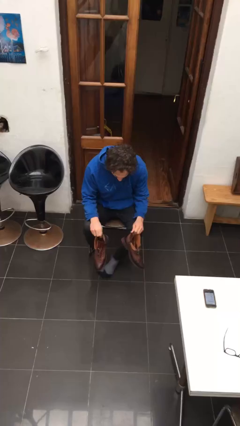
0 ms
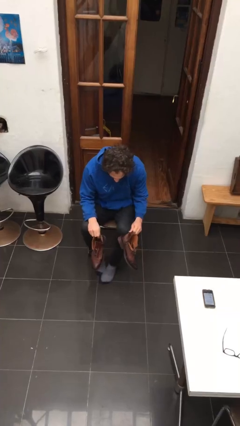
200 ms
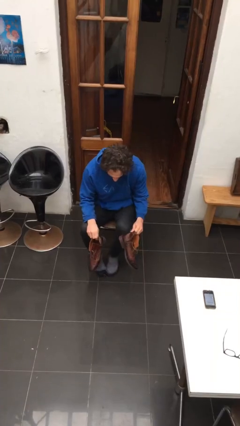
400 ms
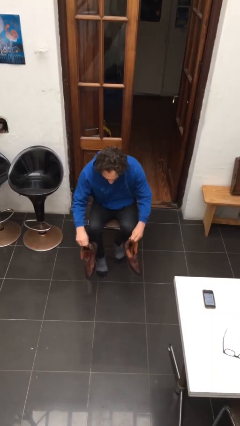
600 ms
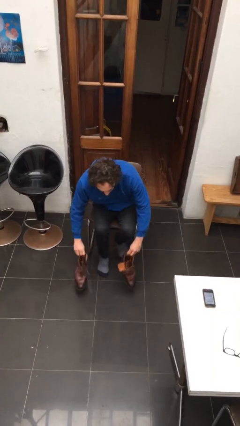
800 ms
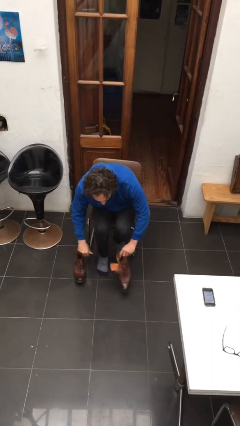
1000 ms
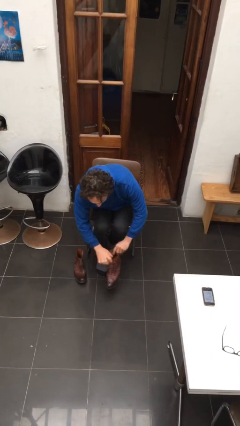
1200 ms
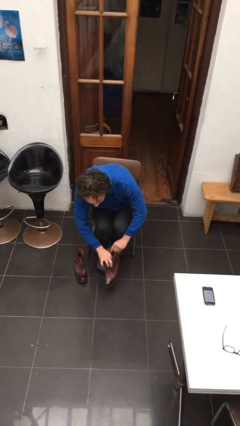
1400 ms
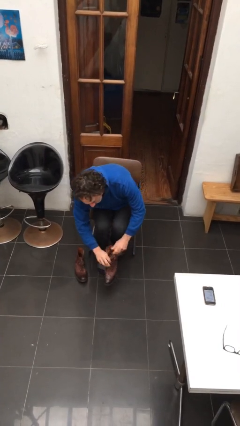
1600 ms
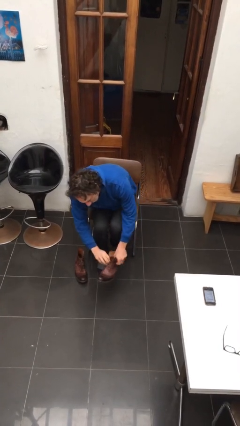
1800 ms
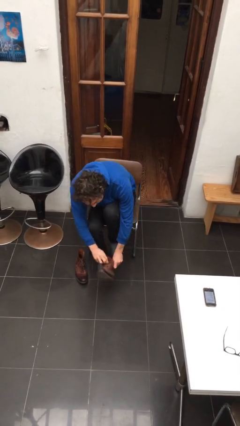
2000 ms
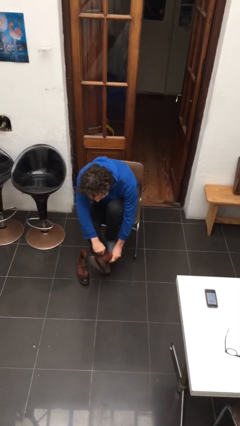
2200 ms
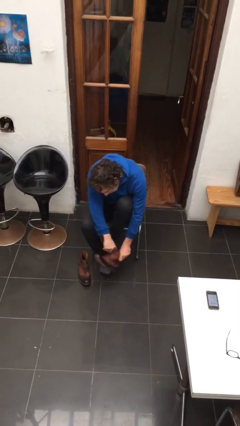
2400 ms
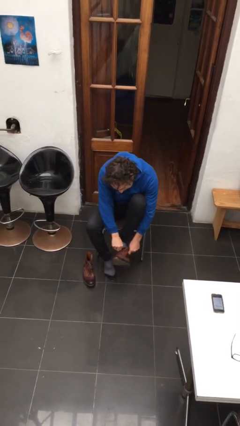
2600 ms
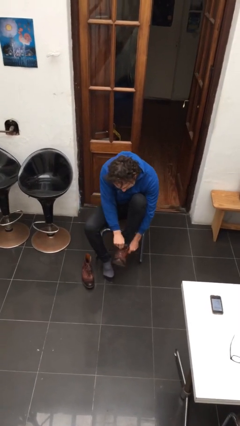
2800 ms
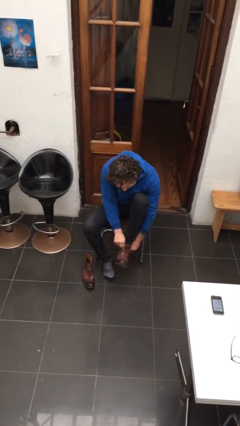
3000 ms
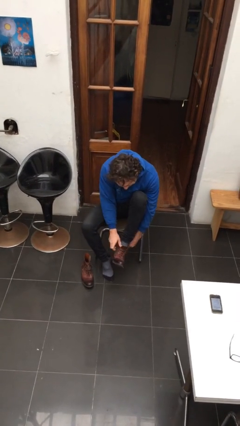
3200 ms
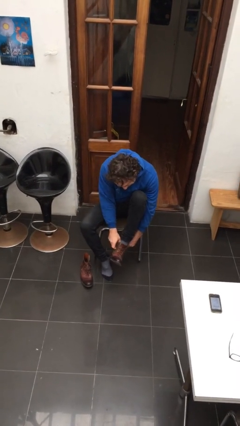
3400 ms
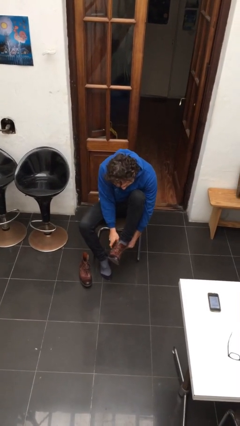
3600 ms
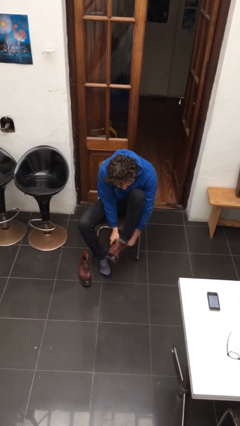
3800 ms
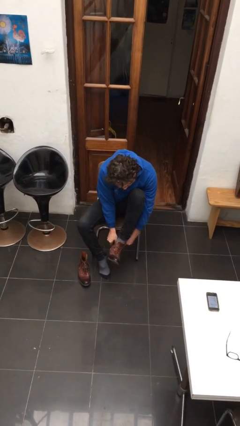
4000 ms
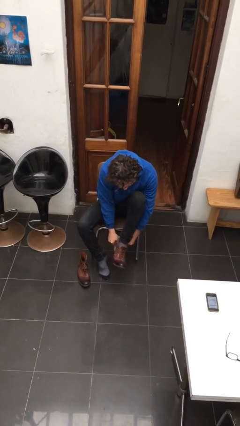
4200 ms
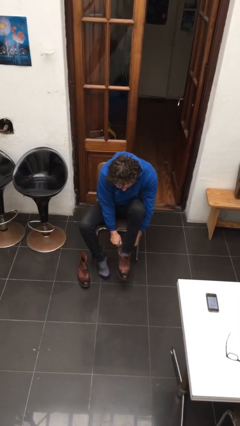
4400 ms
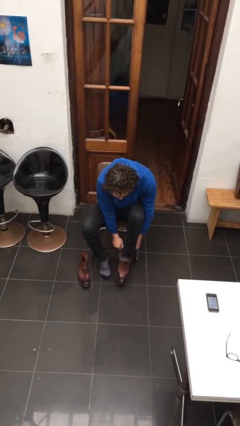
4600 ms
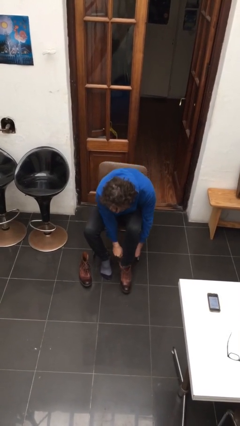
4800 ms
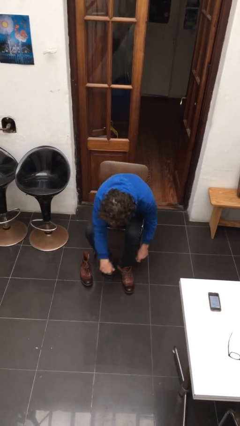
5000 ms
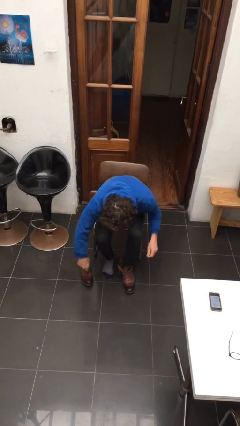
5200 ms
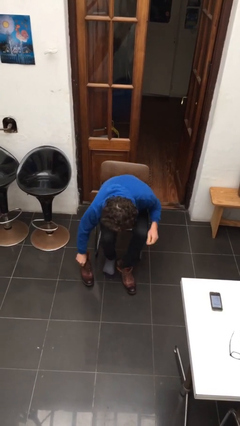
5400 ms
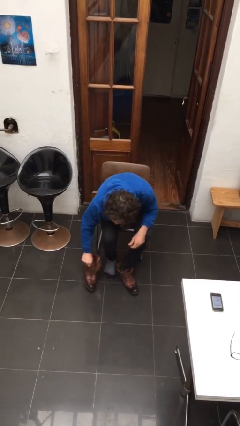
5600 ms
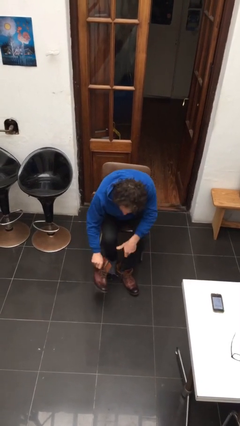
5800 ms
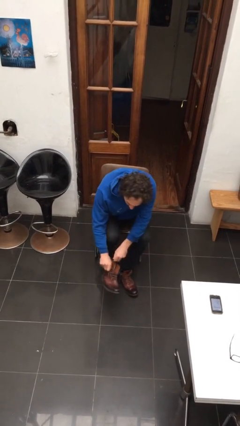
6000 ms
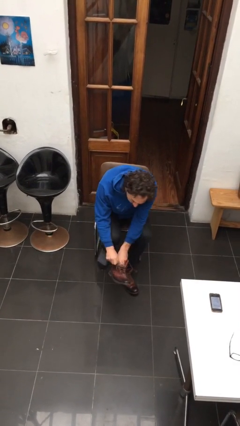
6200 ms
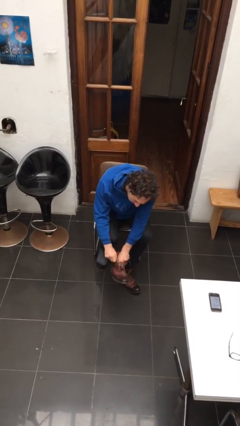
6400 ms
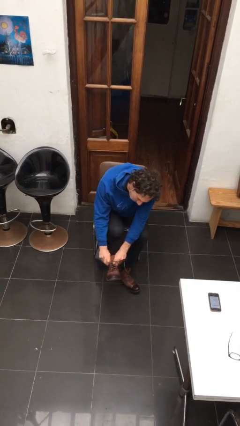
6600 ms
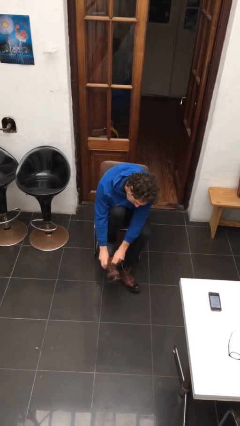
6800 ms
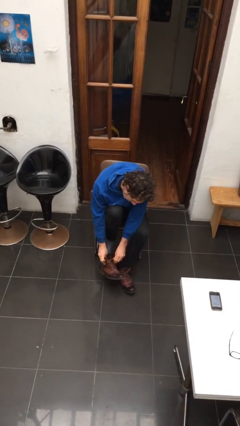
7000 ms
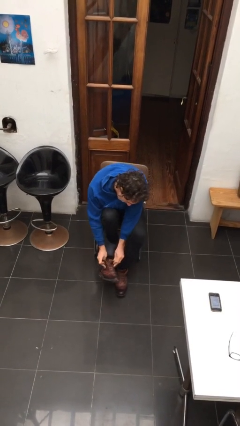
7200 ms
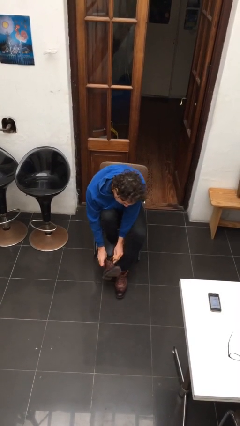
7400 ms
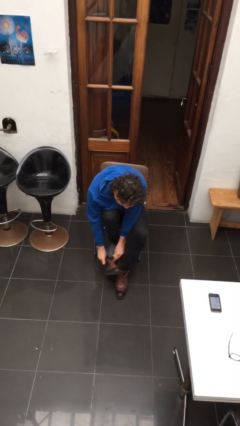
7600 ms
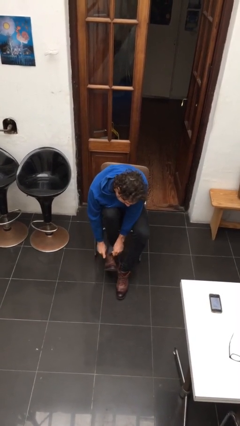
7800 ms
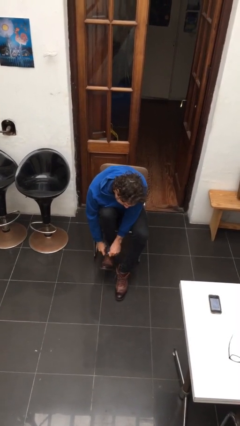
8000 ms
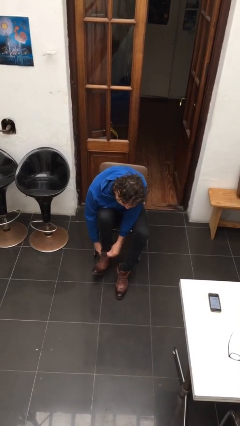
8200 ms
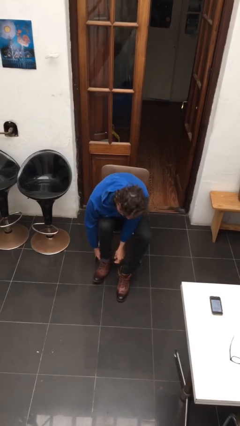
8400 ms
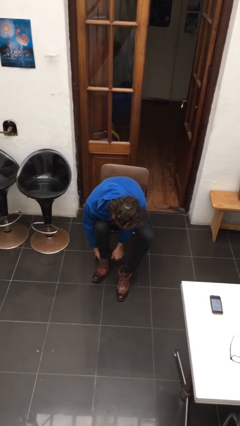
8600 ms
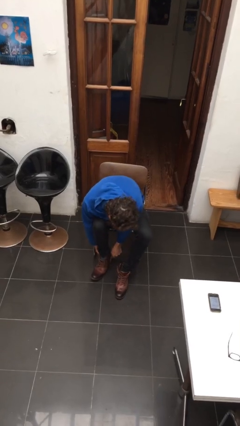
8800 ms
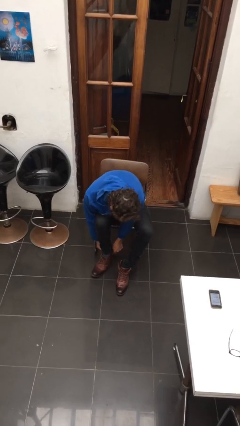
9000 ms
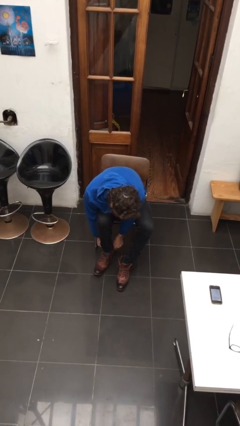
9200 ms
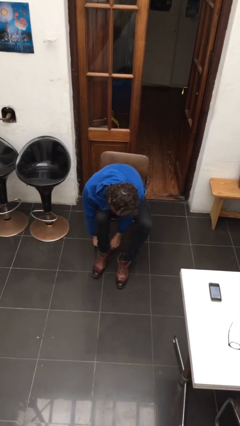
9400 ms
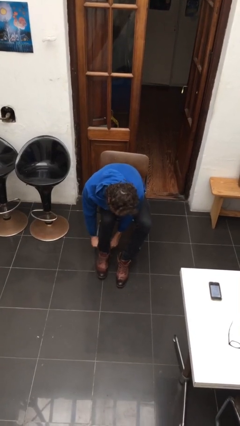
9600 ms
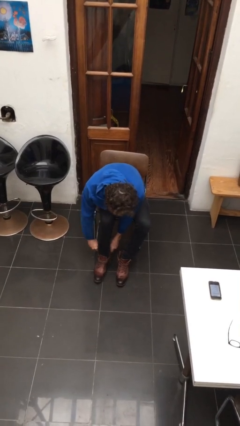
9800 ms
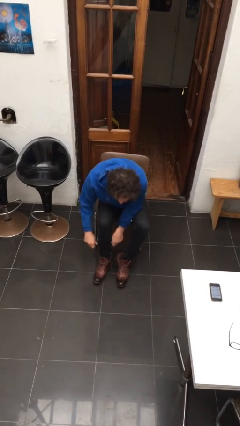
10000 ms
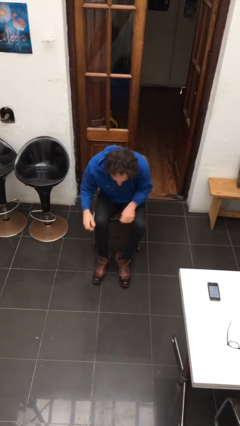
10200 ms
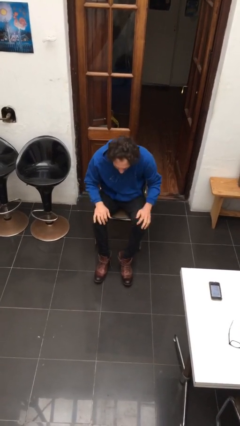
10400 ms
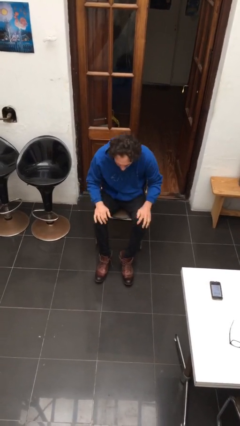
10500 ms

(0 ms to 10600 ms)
person puts on boots

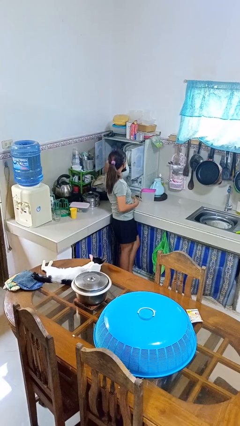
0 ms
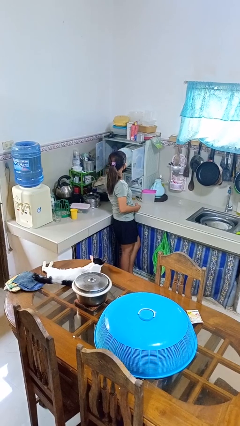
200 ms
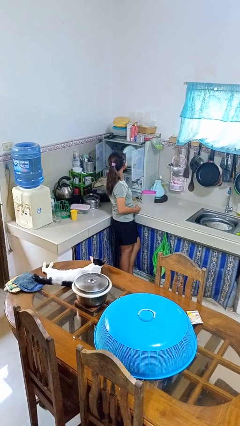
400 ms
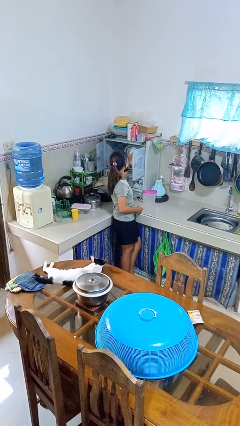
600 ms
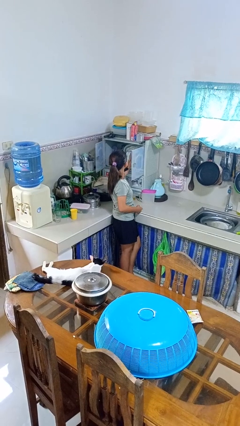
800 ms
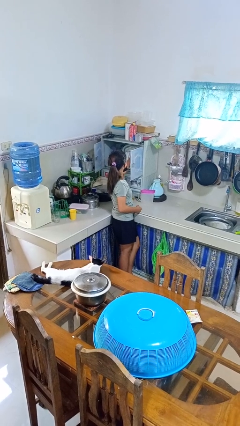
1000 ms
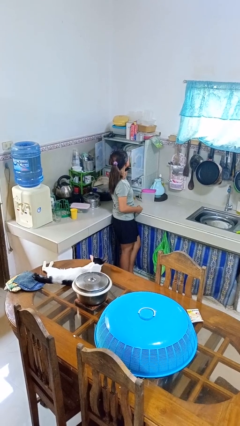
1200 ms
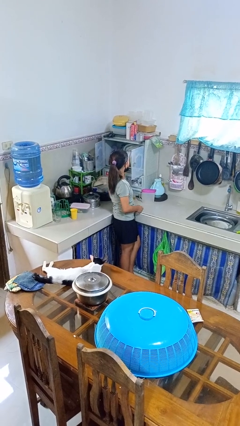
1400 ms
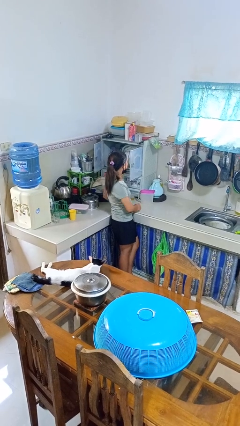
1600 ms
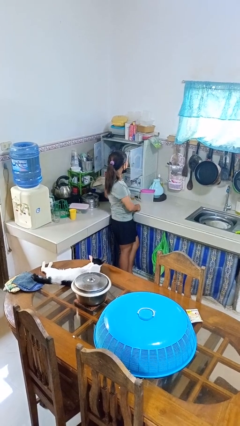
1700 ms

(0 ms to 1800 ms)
person puts object into kitchen drawer

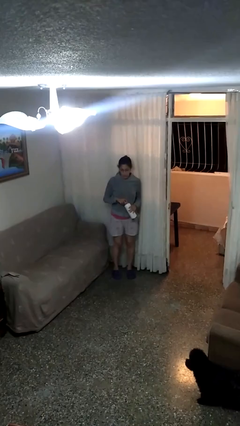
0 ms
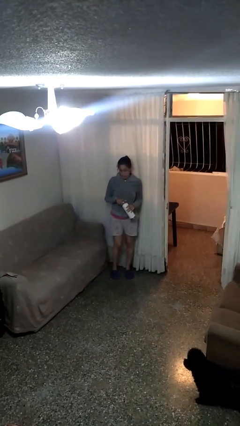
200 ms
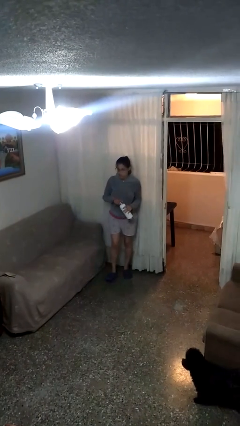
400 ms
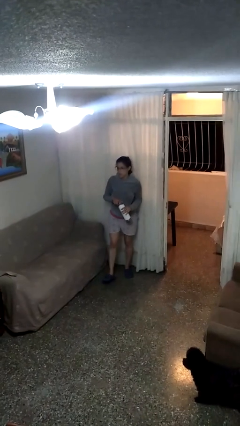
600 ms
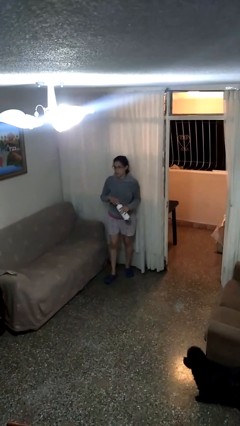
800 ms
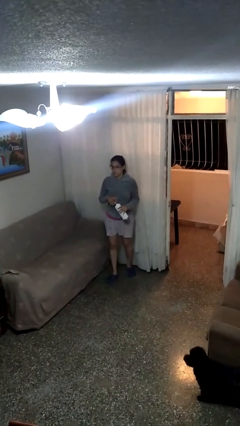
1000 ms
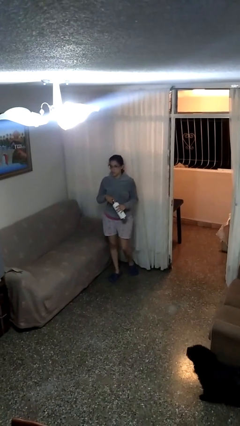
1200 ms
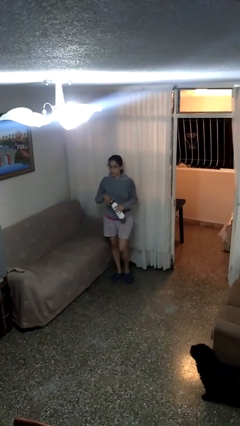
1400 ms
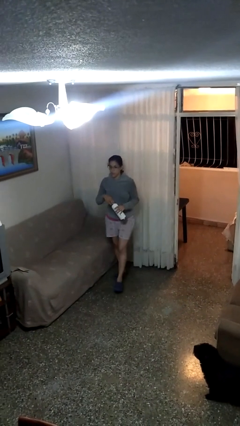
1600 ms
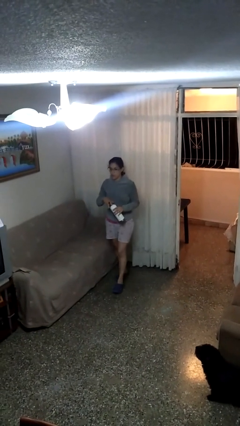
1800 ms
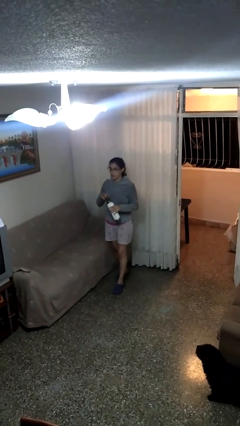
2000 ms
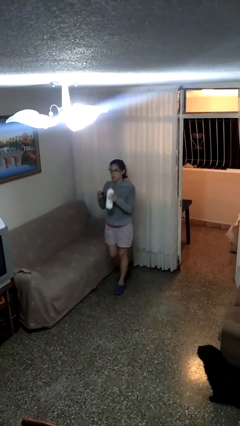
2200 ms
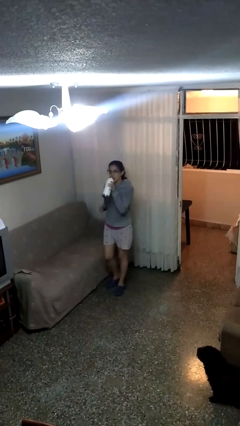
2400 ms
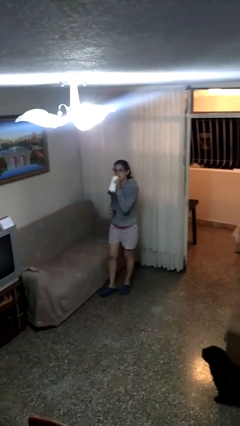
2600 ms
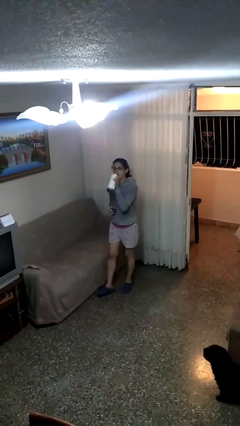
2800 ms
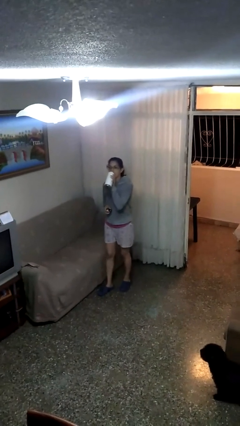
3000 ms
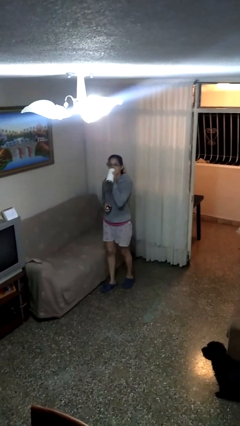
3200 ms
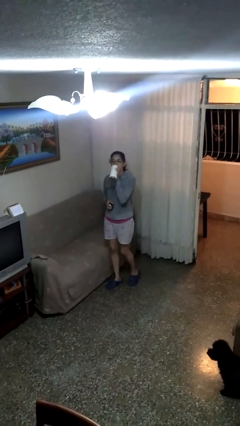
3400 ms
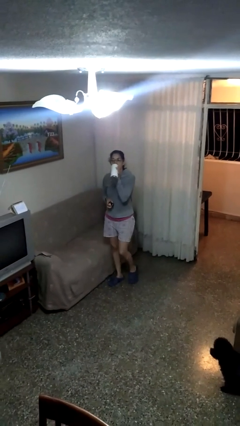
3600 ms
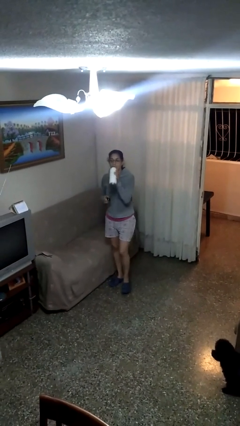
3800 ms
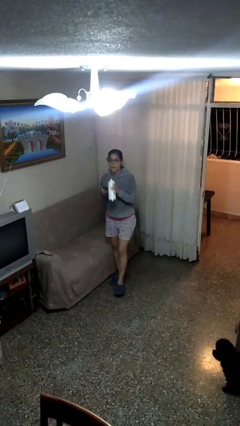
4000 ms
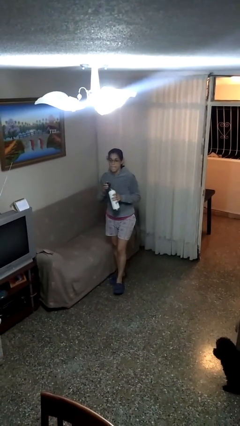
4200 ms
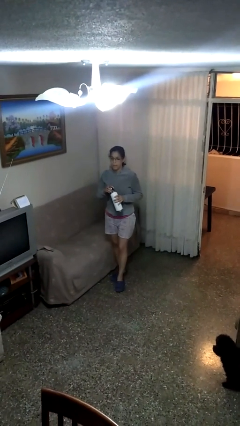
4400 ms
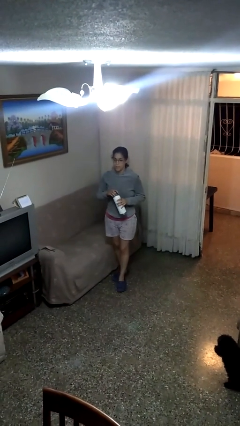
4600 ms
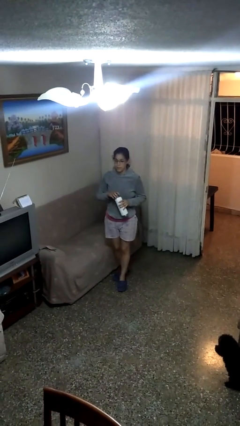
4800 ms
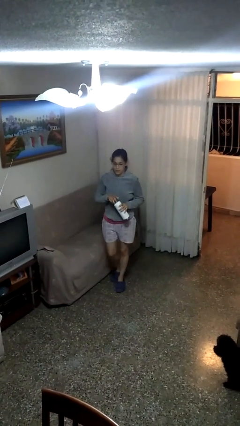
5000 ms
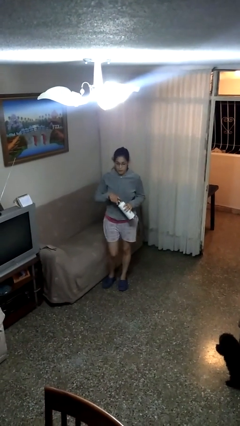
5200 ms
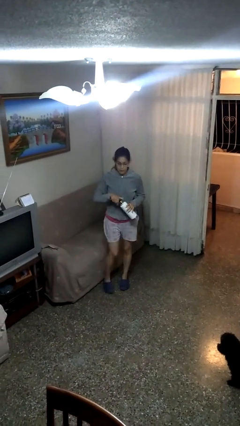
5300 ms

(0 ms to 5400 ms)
person drinks from bottle

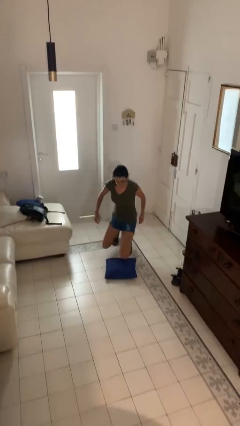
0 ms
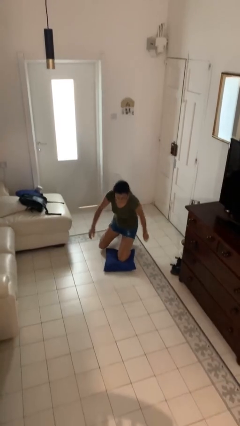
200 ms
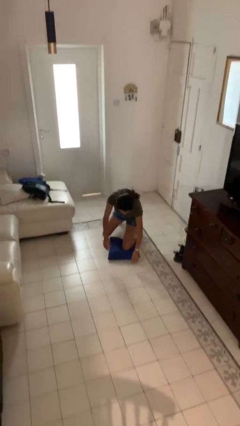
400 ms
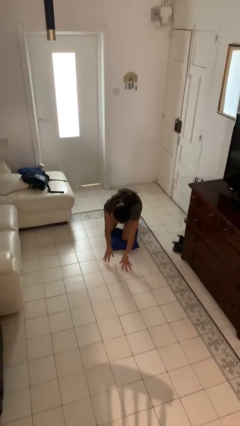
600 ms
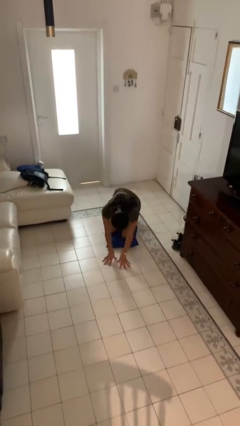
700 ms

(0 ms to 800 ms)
person trips on object on floor
